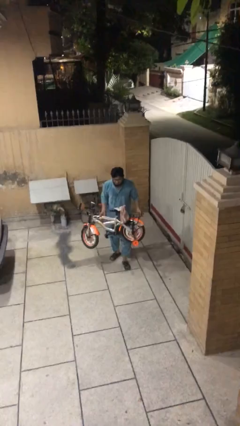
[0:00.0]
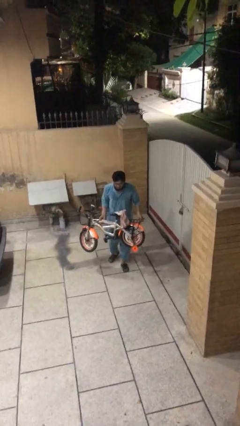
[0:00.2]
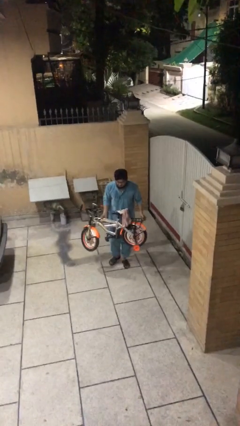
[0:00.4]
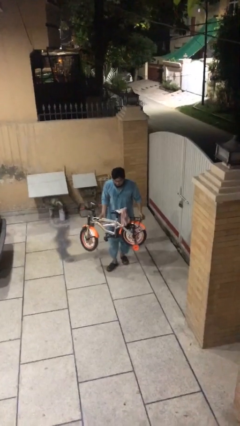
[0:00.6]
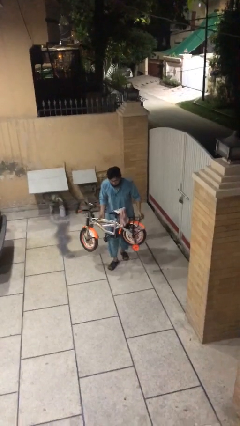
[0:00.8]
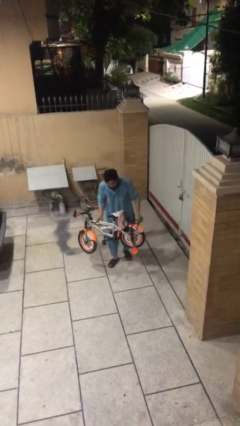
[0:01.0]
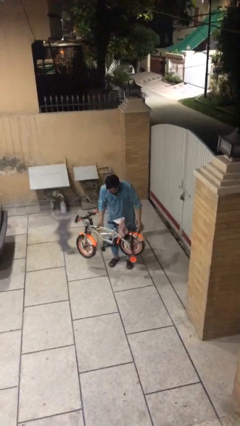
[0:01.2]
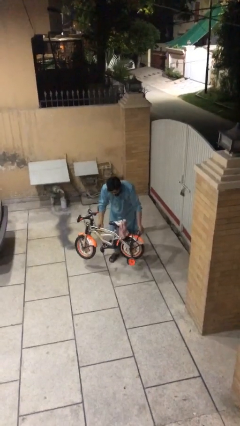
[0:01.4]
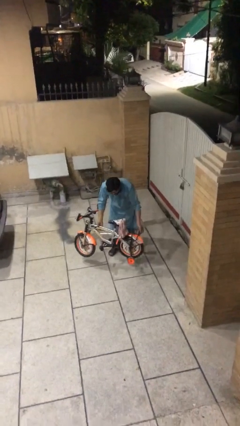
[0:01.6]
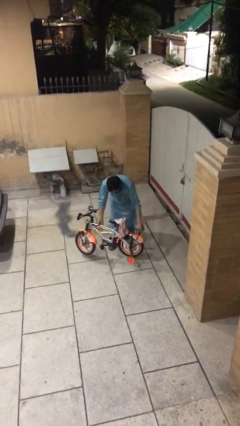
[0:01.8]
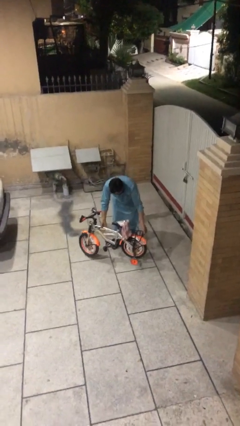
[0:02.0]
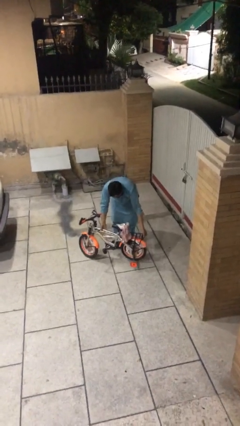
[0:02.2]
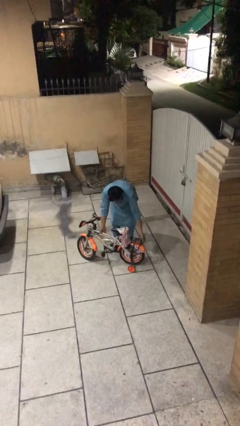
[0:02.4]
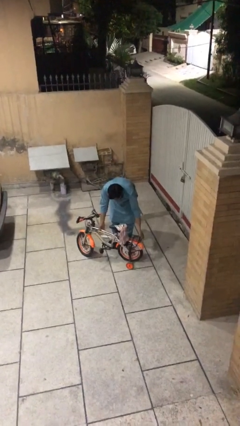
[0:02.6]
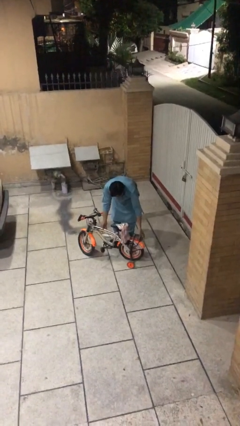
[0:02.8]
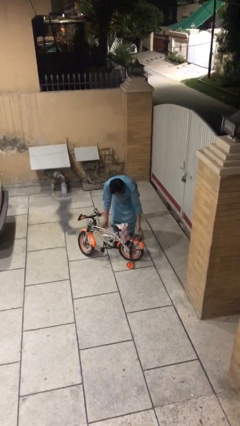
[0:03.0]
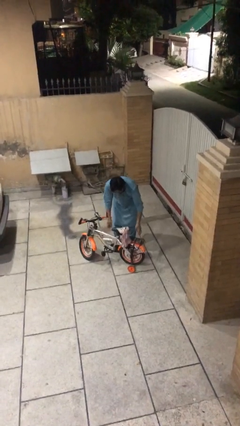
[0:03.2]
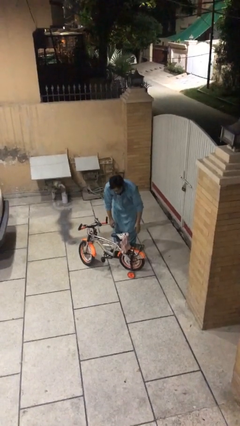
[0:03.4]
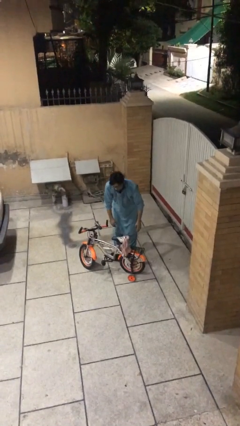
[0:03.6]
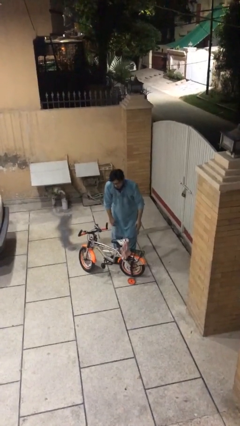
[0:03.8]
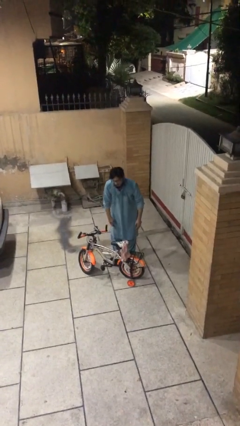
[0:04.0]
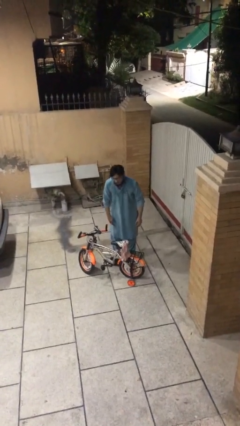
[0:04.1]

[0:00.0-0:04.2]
person puts down object on floor

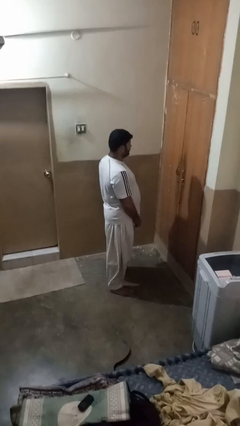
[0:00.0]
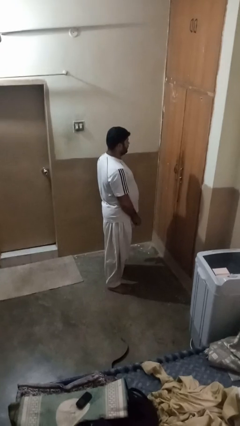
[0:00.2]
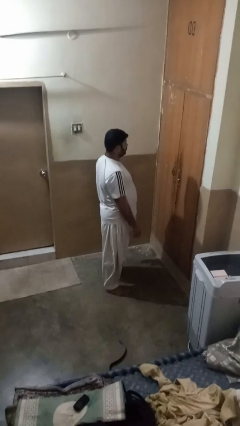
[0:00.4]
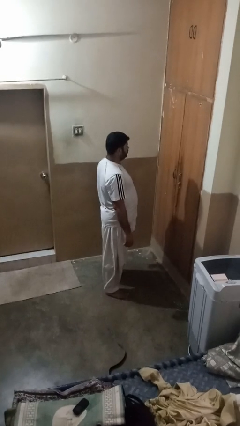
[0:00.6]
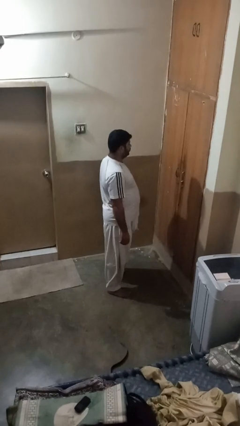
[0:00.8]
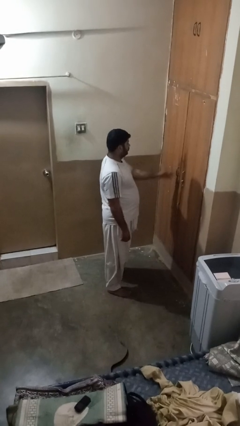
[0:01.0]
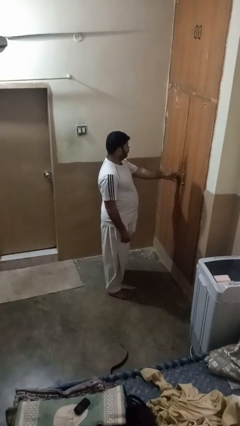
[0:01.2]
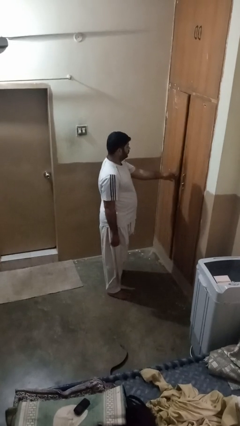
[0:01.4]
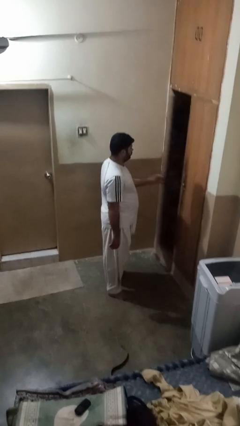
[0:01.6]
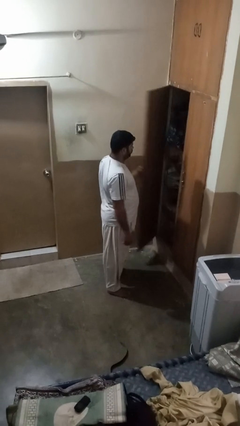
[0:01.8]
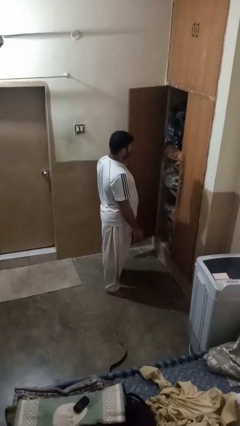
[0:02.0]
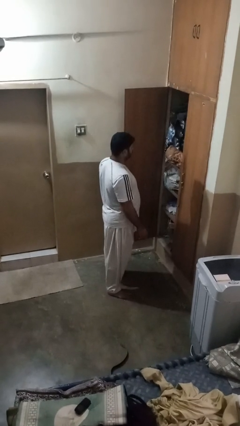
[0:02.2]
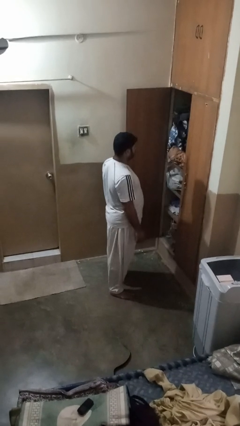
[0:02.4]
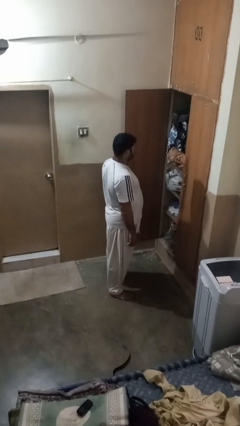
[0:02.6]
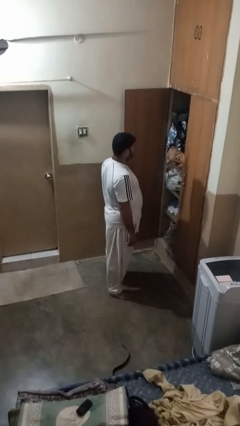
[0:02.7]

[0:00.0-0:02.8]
person opens closet door

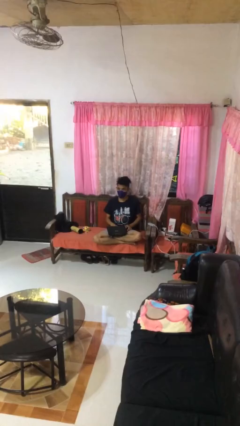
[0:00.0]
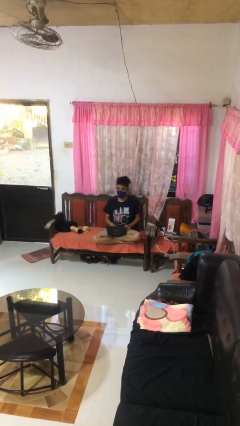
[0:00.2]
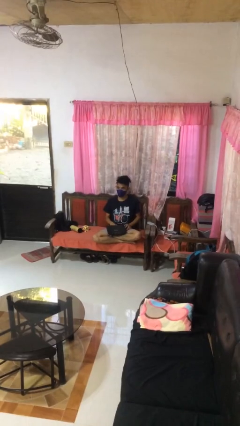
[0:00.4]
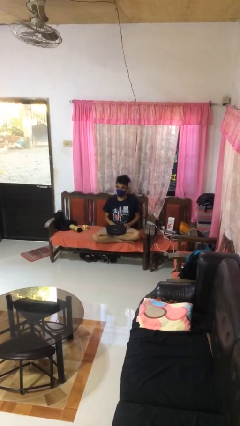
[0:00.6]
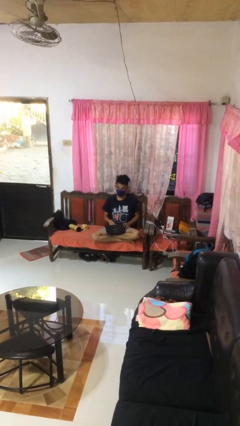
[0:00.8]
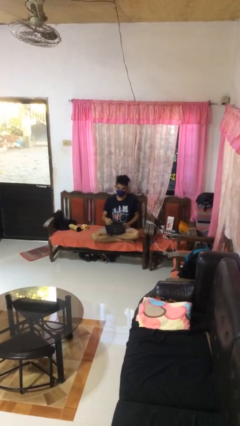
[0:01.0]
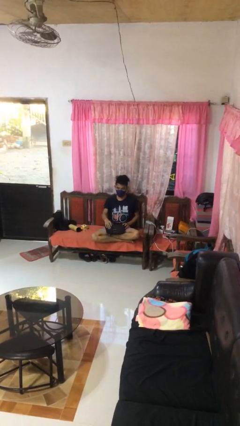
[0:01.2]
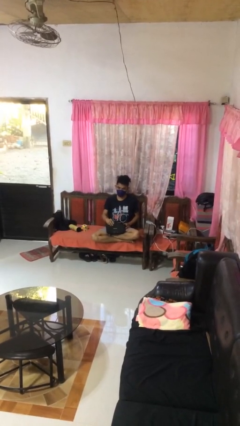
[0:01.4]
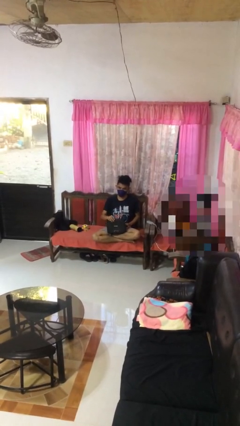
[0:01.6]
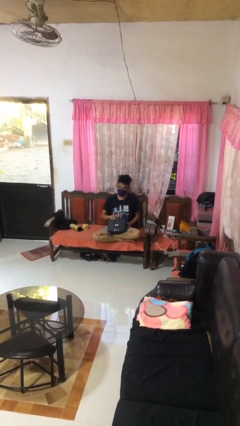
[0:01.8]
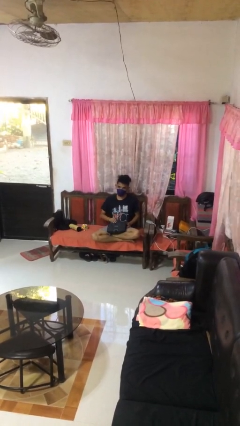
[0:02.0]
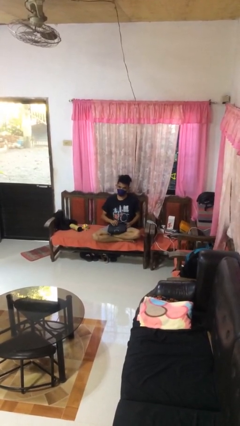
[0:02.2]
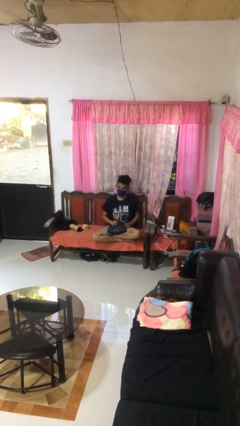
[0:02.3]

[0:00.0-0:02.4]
person closes laptop

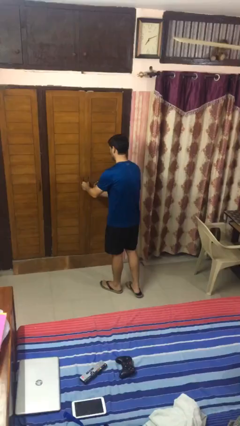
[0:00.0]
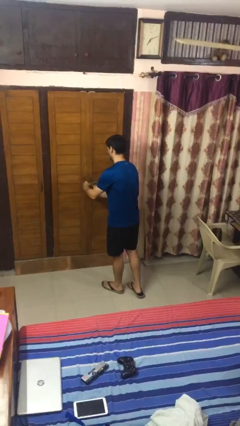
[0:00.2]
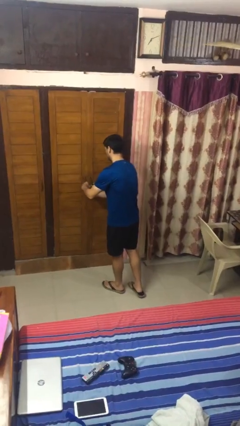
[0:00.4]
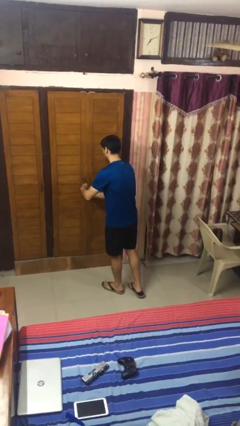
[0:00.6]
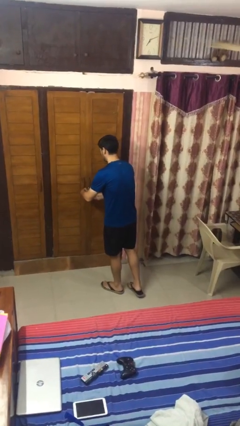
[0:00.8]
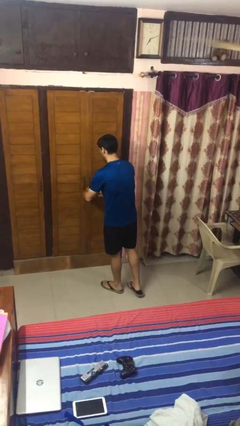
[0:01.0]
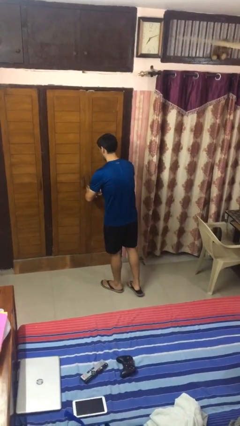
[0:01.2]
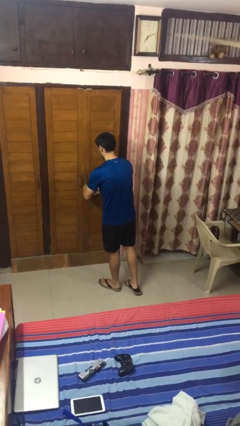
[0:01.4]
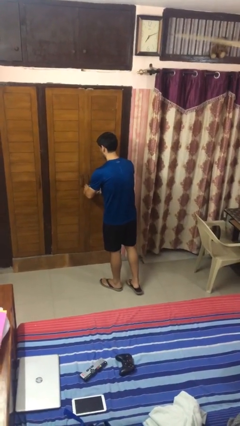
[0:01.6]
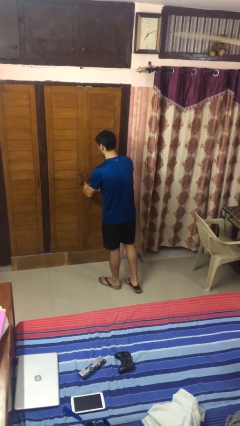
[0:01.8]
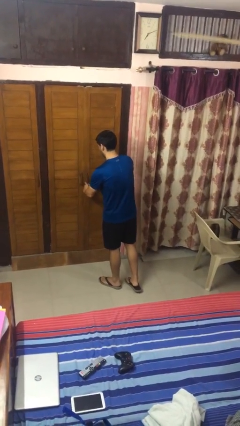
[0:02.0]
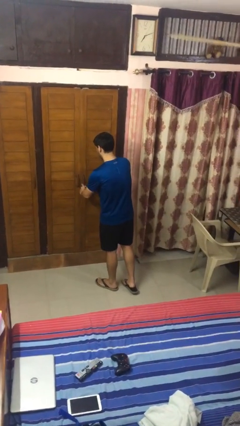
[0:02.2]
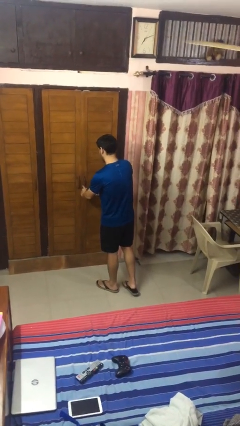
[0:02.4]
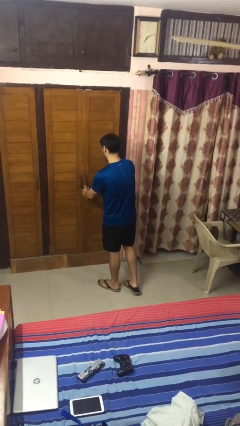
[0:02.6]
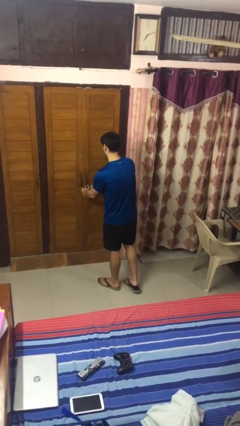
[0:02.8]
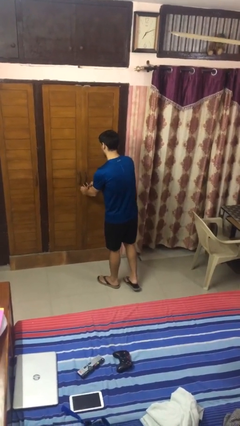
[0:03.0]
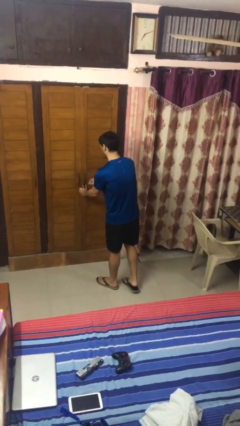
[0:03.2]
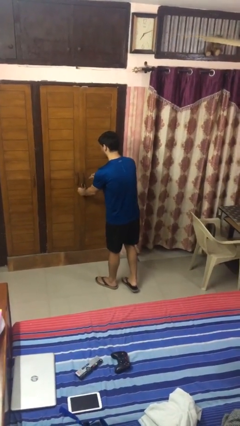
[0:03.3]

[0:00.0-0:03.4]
person locks door with keys

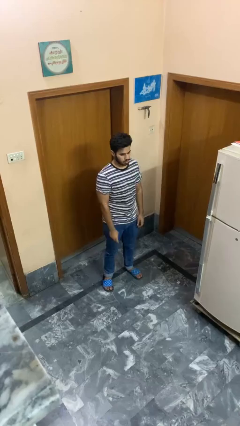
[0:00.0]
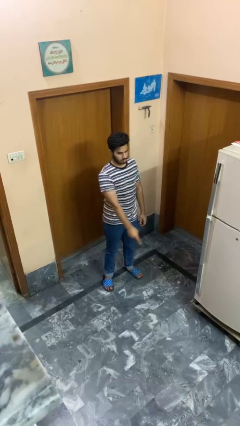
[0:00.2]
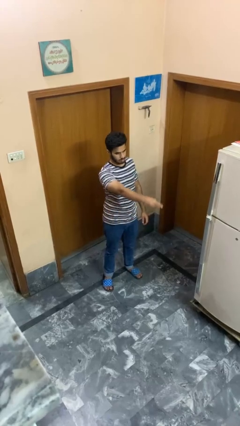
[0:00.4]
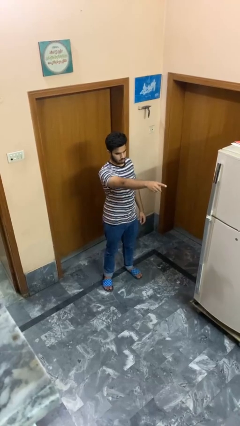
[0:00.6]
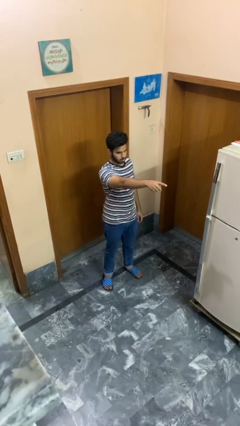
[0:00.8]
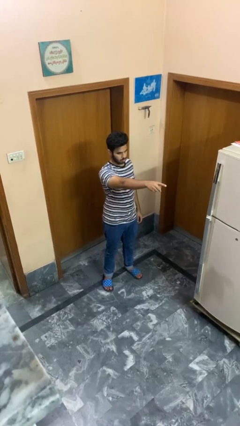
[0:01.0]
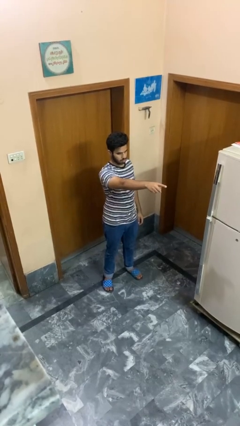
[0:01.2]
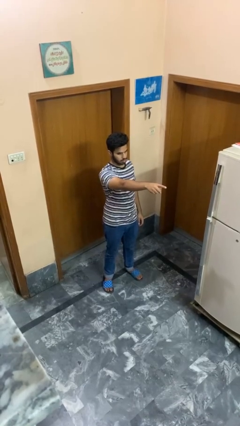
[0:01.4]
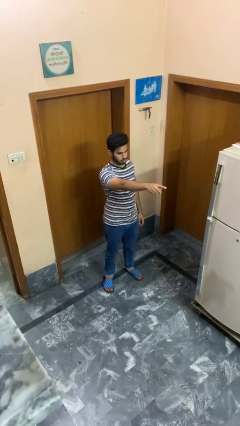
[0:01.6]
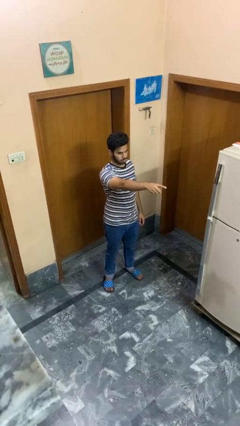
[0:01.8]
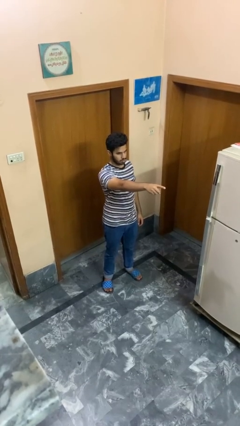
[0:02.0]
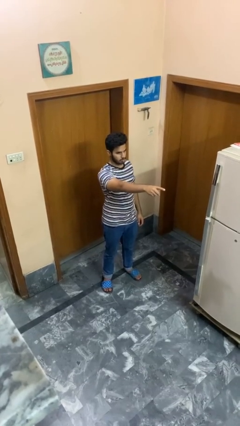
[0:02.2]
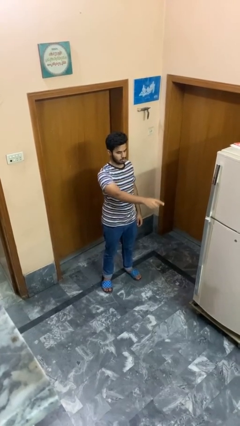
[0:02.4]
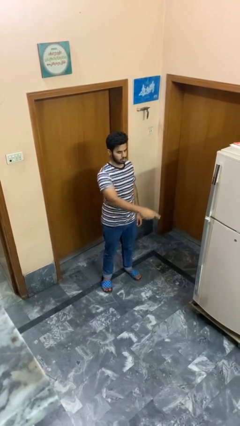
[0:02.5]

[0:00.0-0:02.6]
person points at person

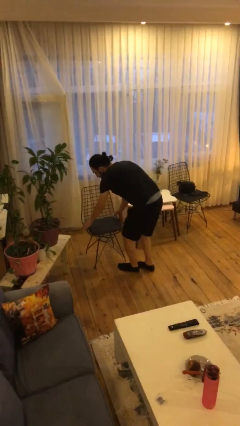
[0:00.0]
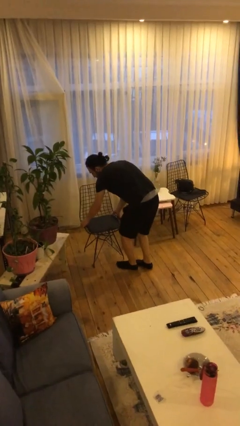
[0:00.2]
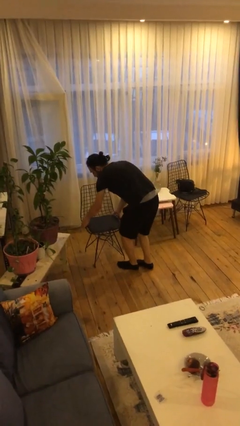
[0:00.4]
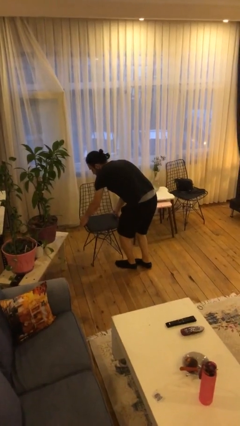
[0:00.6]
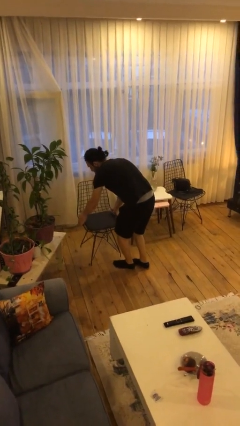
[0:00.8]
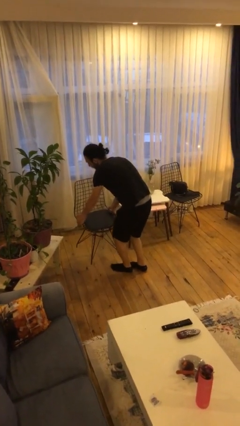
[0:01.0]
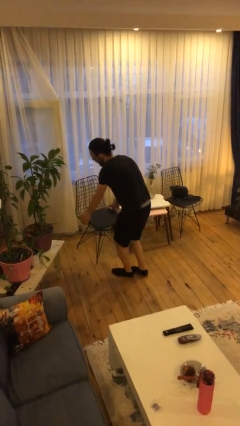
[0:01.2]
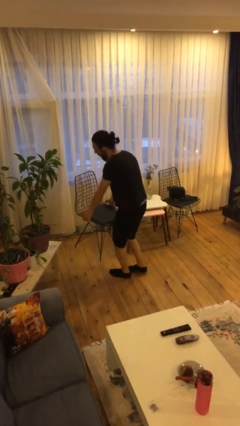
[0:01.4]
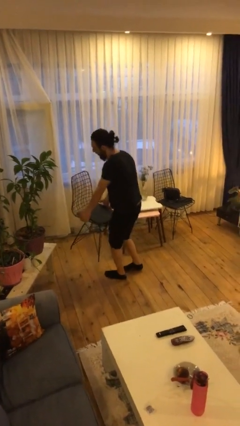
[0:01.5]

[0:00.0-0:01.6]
person picks up object from floor

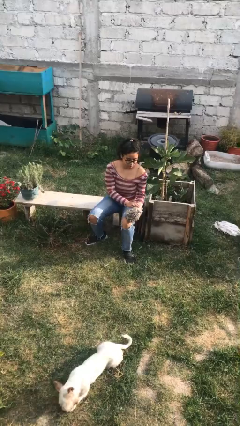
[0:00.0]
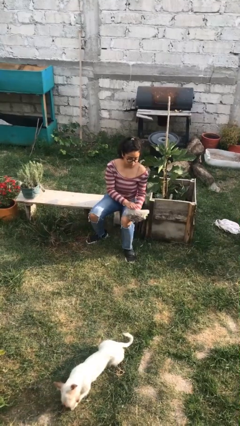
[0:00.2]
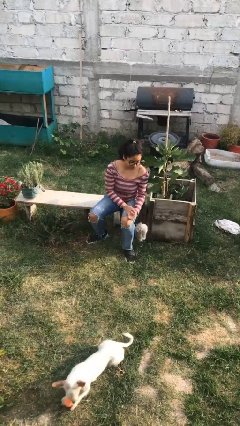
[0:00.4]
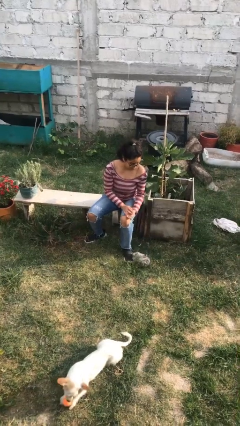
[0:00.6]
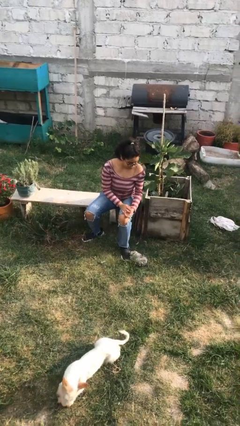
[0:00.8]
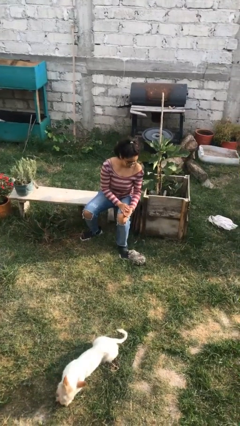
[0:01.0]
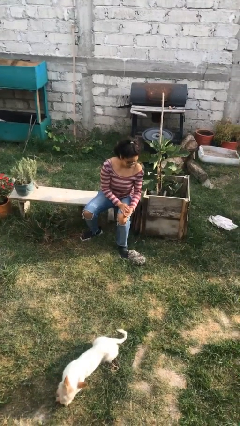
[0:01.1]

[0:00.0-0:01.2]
person drops object
